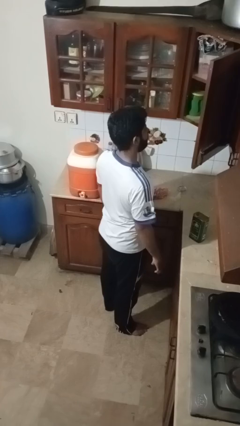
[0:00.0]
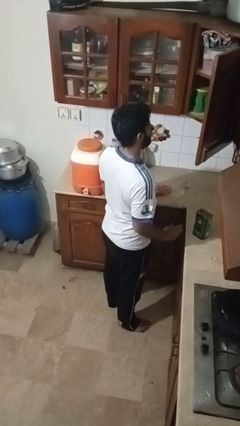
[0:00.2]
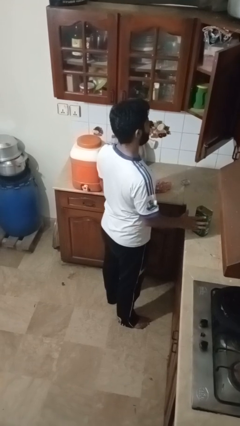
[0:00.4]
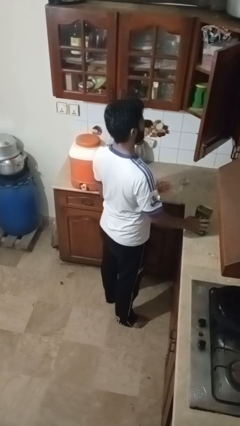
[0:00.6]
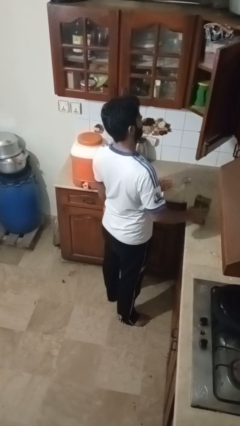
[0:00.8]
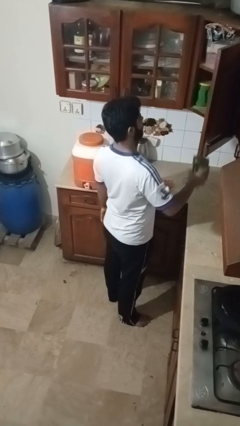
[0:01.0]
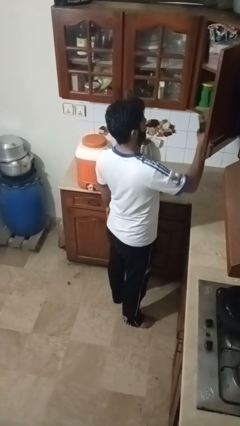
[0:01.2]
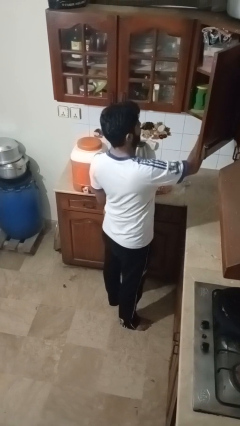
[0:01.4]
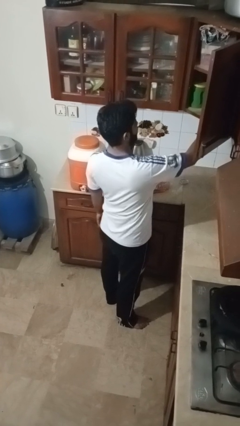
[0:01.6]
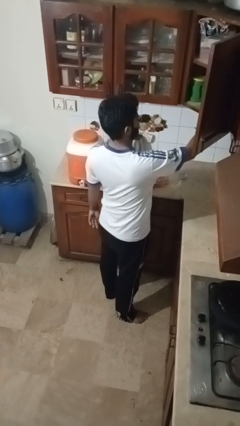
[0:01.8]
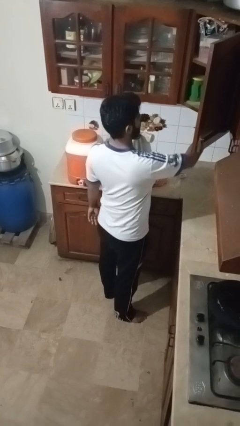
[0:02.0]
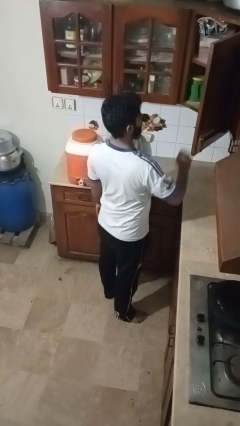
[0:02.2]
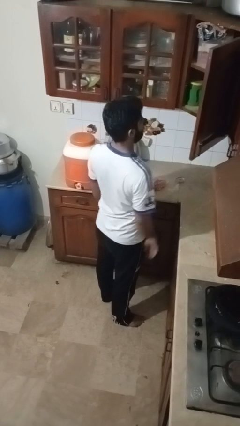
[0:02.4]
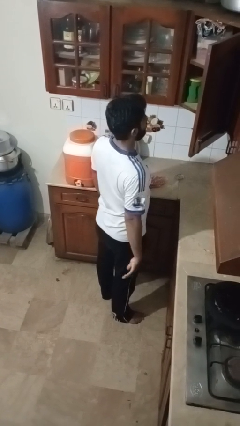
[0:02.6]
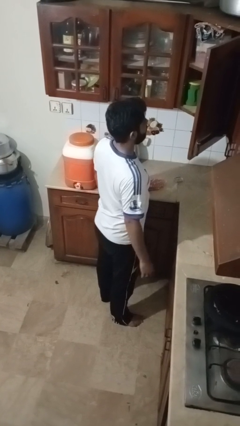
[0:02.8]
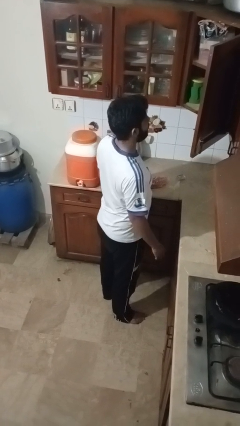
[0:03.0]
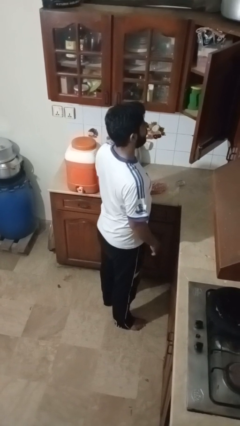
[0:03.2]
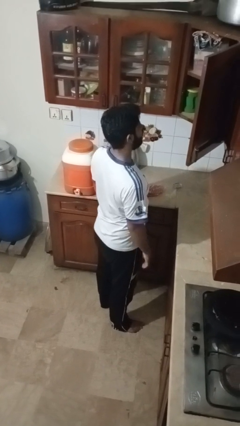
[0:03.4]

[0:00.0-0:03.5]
person puts object in cabinet

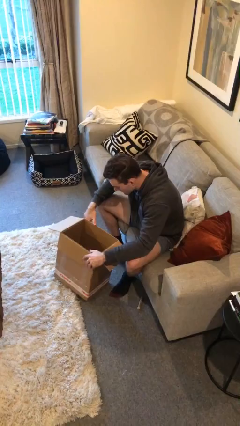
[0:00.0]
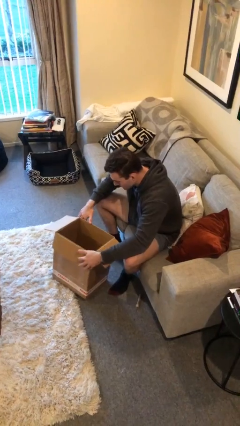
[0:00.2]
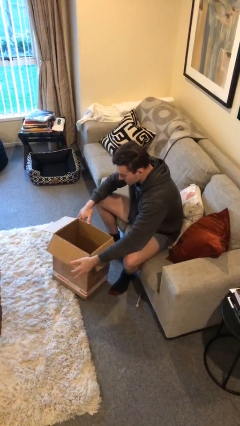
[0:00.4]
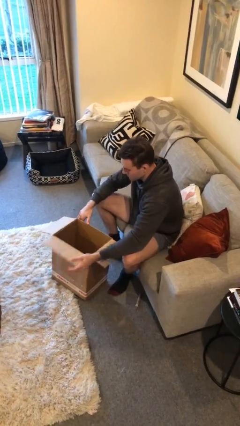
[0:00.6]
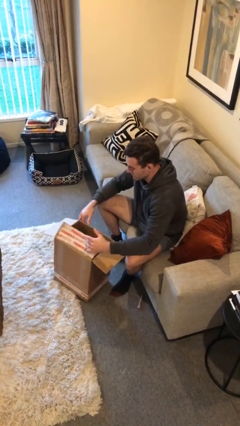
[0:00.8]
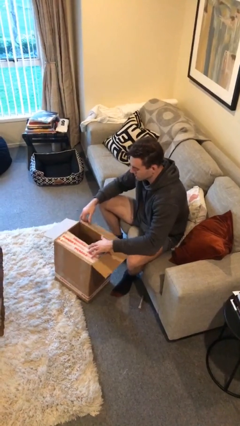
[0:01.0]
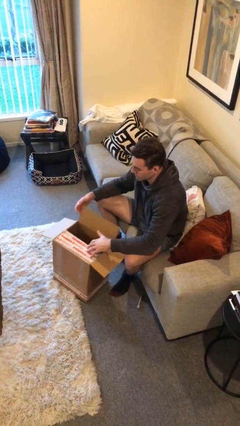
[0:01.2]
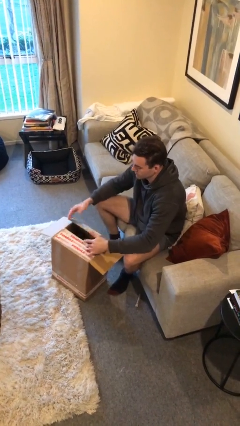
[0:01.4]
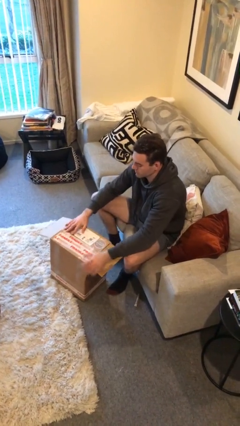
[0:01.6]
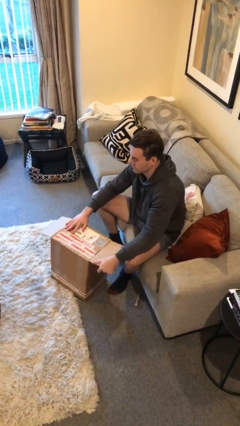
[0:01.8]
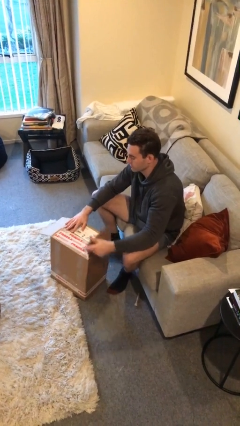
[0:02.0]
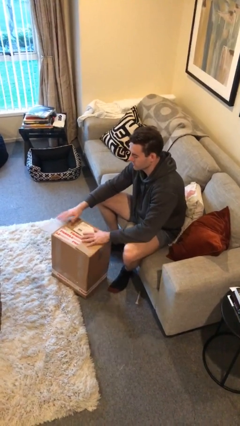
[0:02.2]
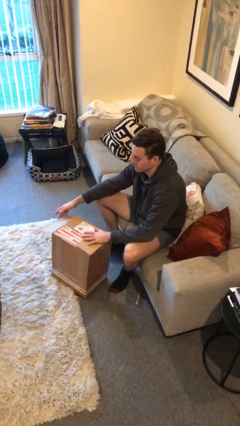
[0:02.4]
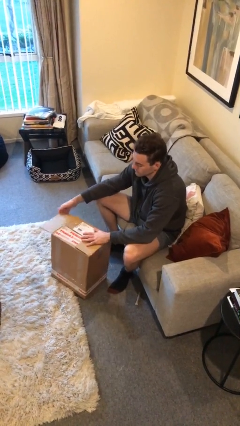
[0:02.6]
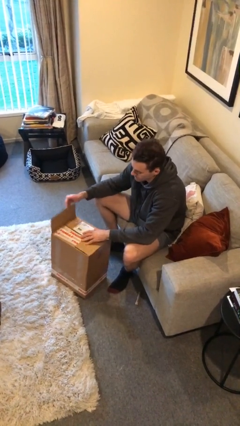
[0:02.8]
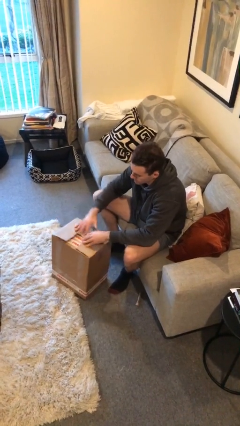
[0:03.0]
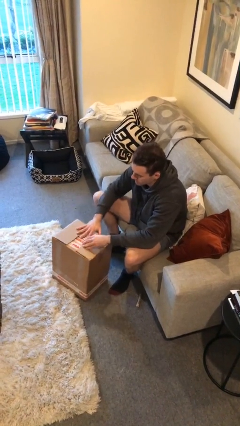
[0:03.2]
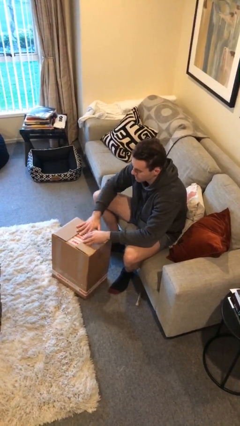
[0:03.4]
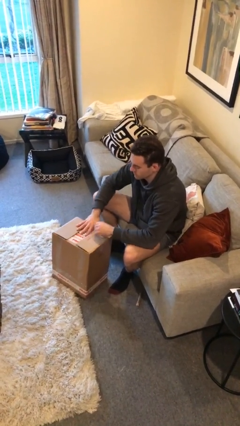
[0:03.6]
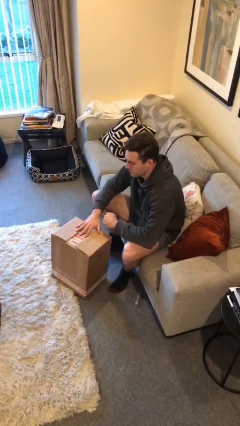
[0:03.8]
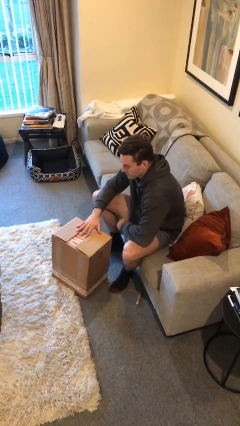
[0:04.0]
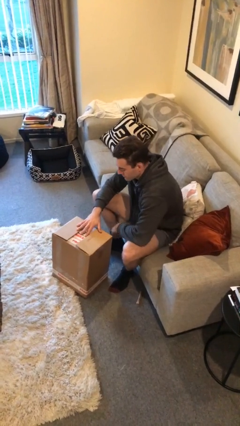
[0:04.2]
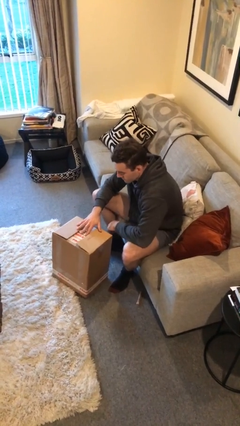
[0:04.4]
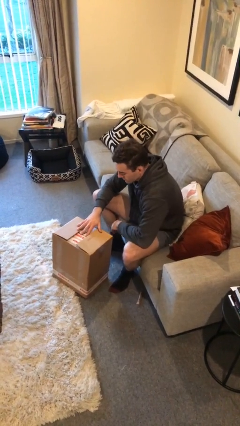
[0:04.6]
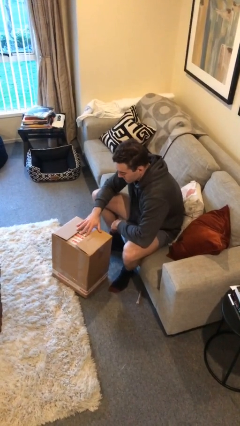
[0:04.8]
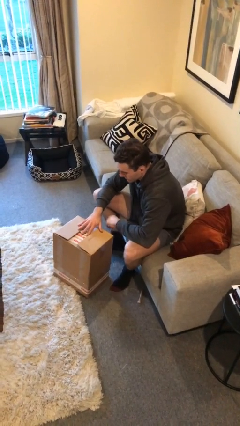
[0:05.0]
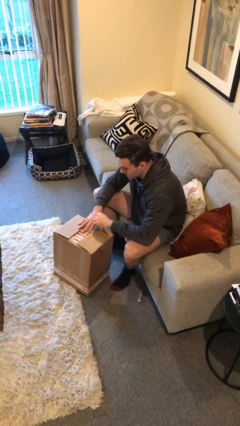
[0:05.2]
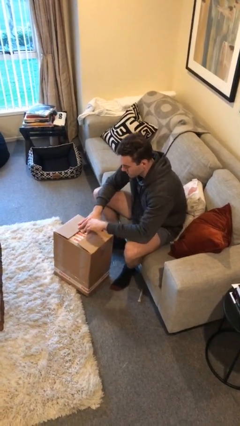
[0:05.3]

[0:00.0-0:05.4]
person closes box

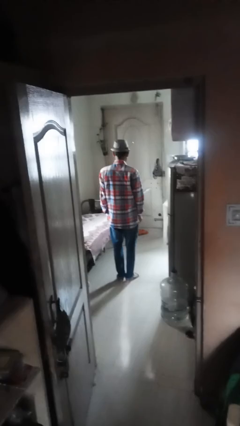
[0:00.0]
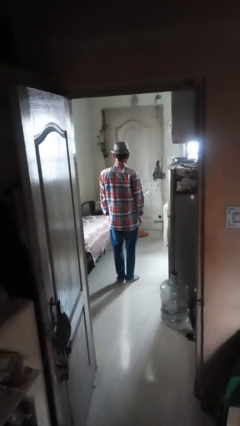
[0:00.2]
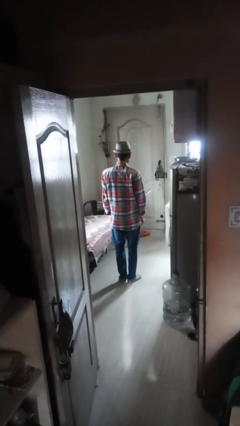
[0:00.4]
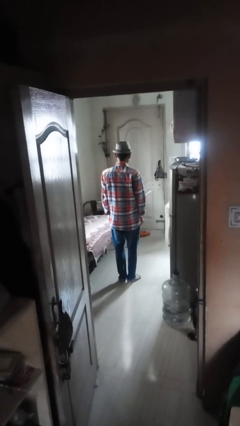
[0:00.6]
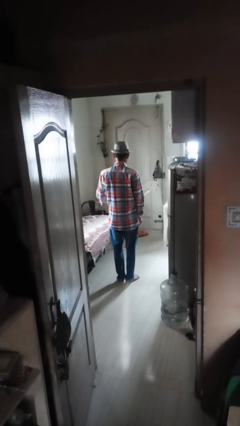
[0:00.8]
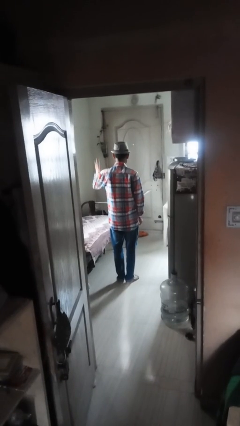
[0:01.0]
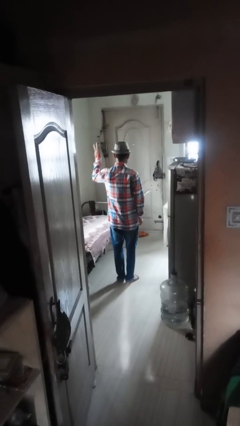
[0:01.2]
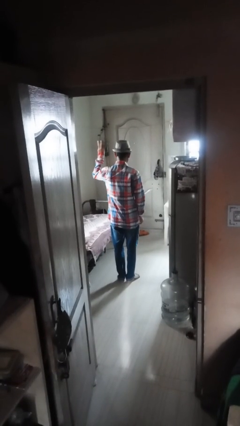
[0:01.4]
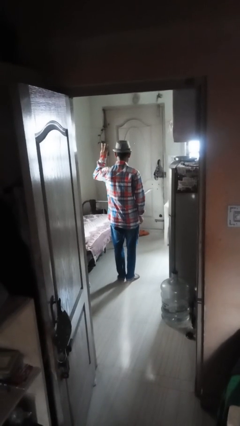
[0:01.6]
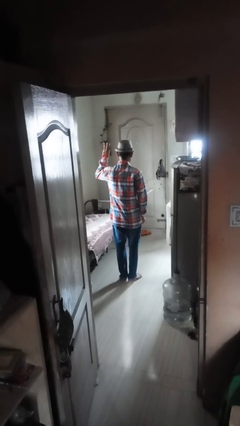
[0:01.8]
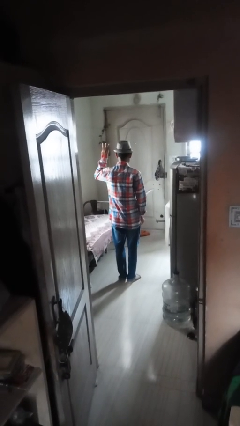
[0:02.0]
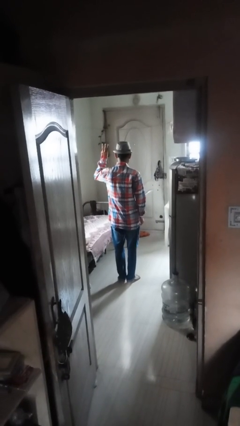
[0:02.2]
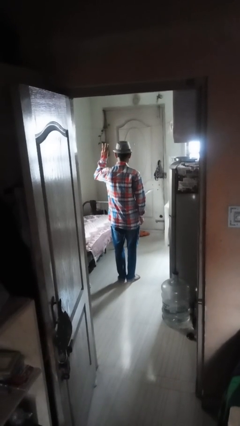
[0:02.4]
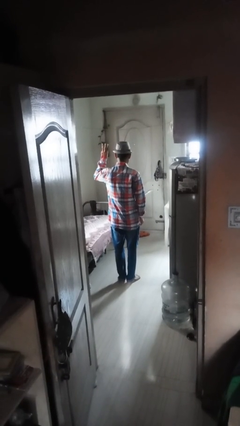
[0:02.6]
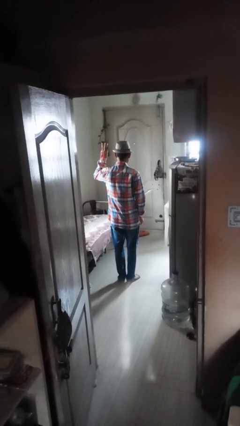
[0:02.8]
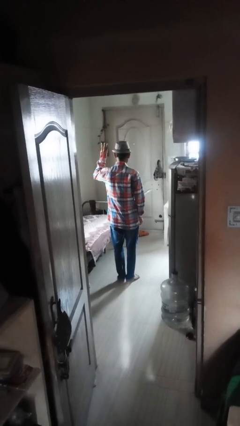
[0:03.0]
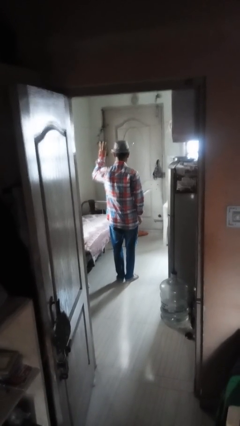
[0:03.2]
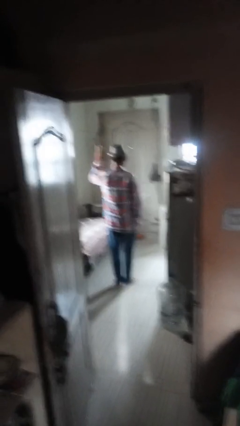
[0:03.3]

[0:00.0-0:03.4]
person gestures number three

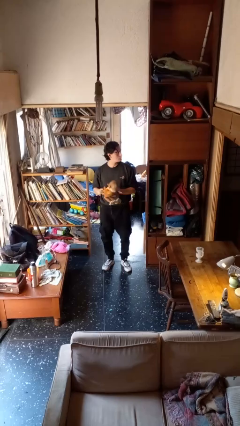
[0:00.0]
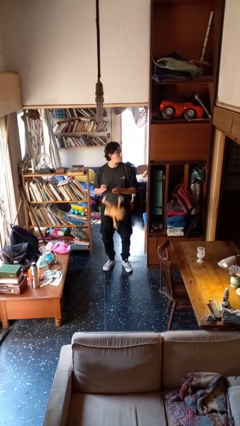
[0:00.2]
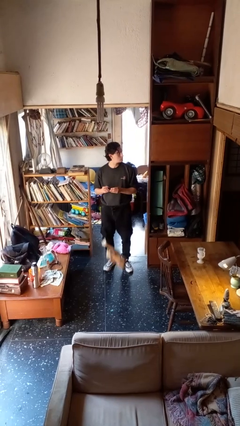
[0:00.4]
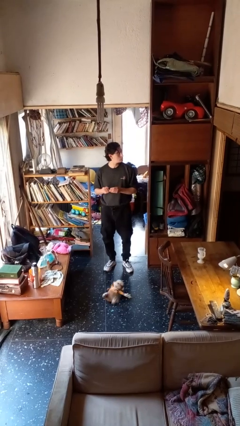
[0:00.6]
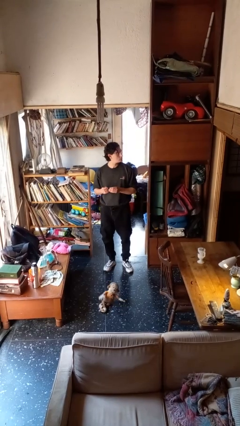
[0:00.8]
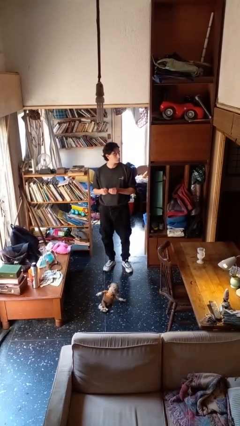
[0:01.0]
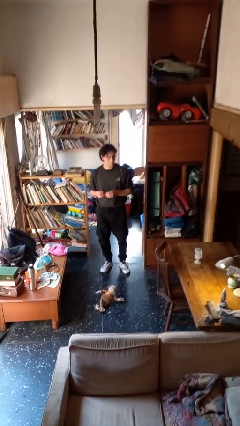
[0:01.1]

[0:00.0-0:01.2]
person drops object

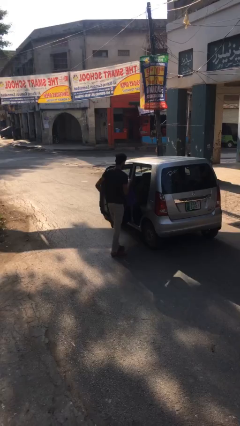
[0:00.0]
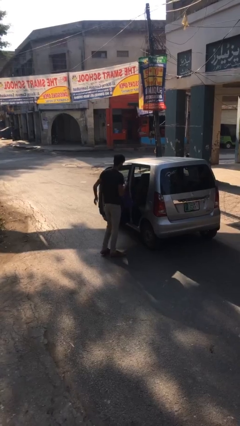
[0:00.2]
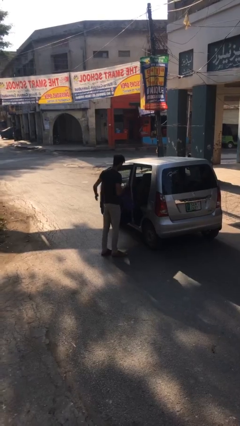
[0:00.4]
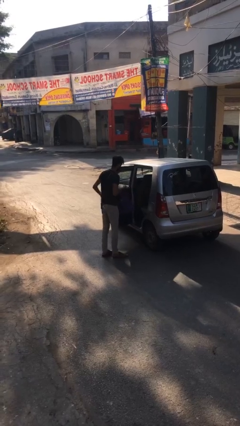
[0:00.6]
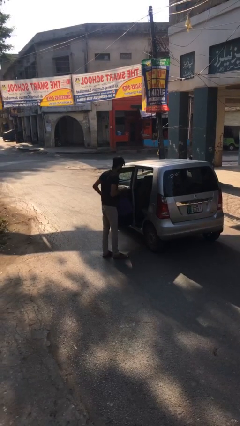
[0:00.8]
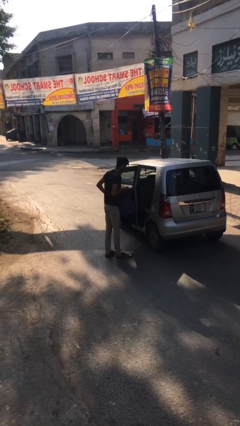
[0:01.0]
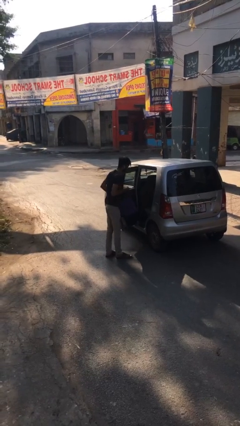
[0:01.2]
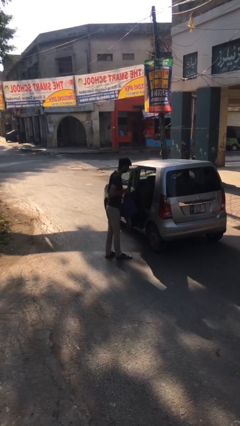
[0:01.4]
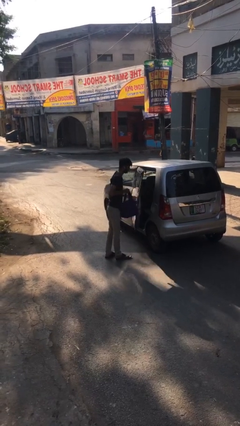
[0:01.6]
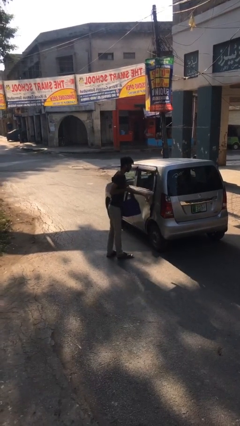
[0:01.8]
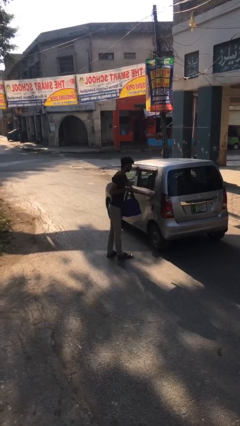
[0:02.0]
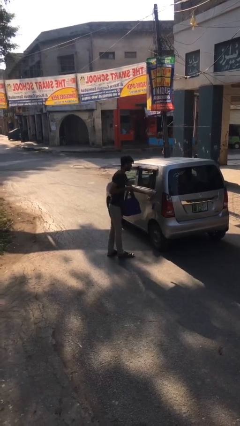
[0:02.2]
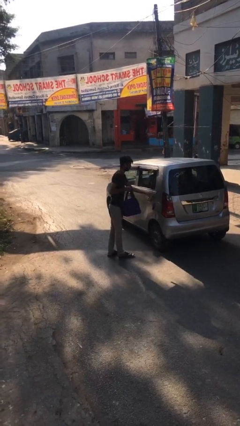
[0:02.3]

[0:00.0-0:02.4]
person closes car door

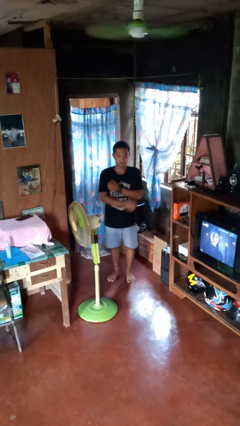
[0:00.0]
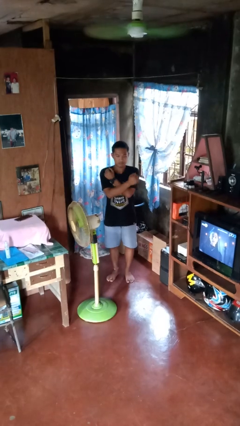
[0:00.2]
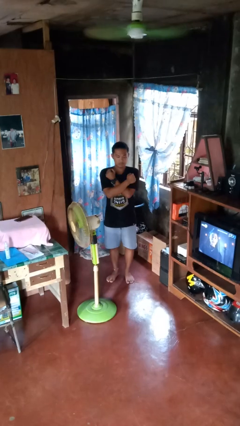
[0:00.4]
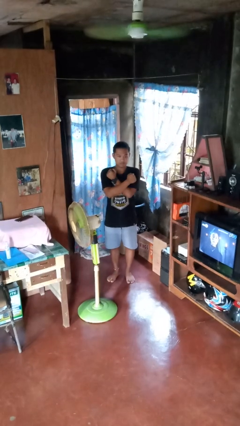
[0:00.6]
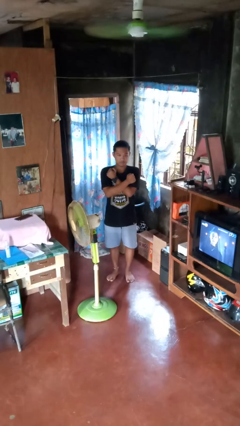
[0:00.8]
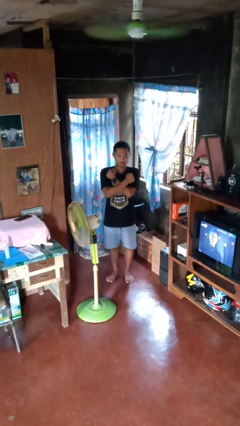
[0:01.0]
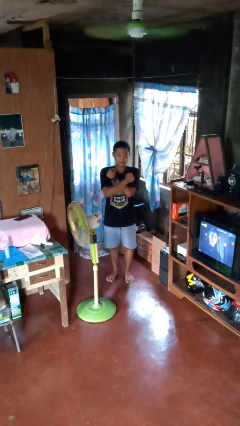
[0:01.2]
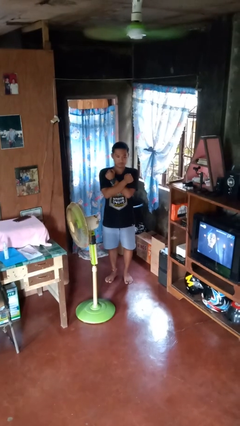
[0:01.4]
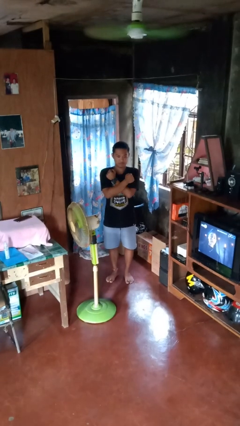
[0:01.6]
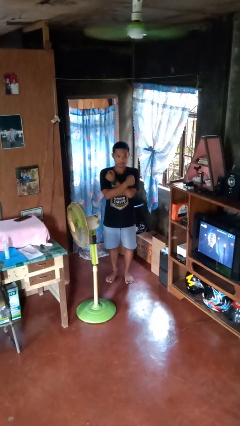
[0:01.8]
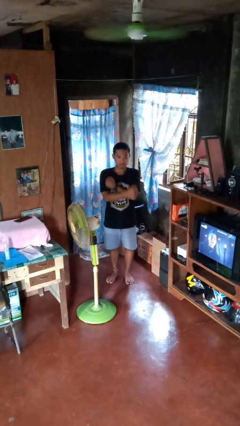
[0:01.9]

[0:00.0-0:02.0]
person gestures arms x
